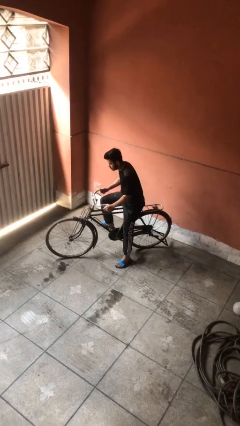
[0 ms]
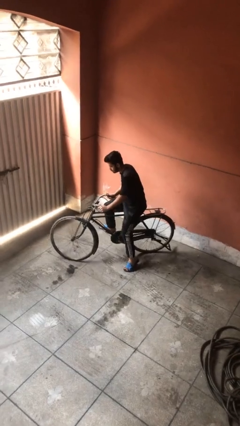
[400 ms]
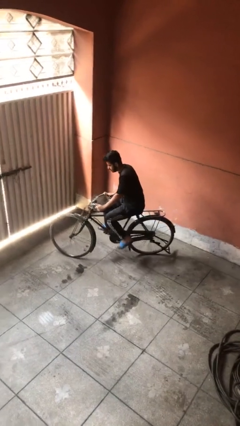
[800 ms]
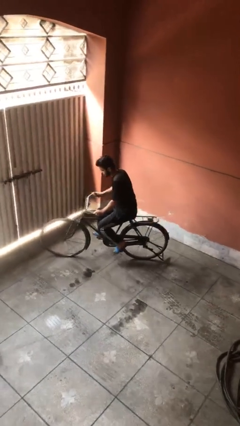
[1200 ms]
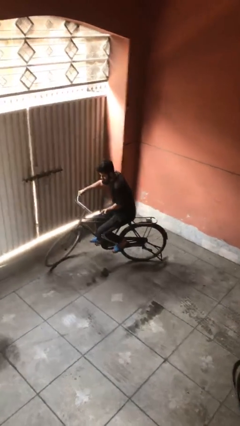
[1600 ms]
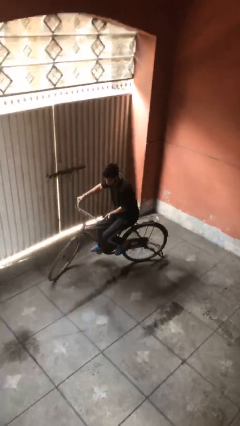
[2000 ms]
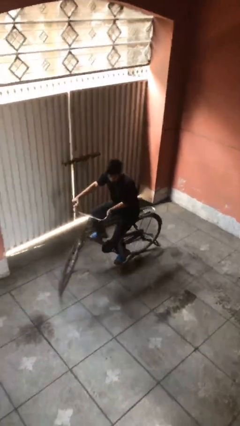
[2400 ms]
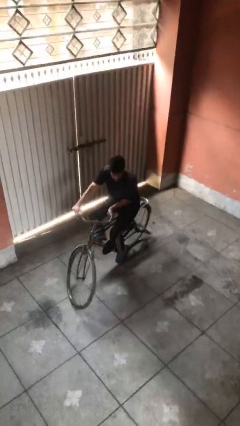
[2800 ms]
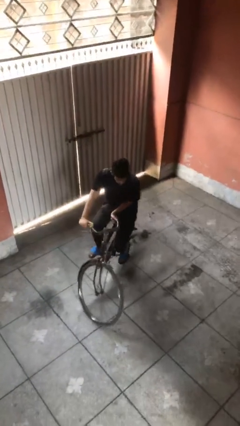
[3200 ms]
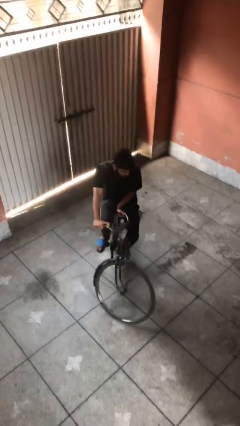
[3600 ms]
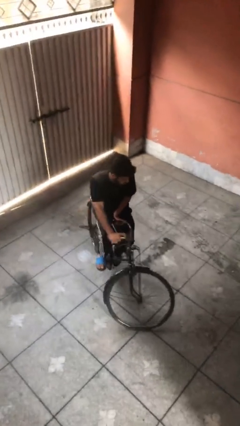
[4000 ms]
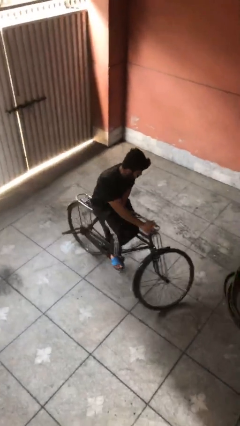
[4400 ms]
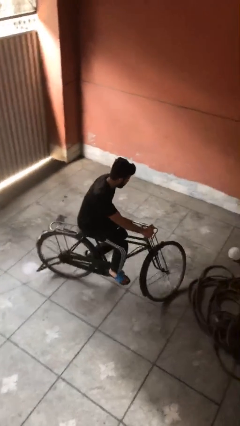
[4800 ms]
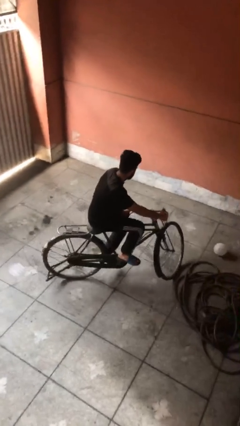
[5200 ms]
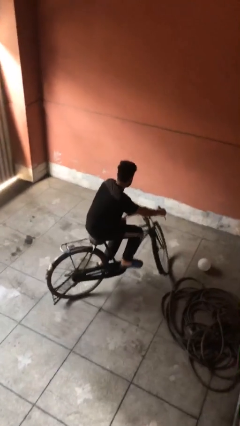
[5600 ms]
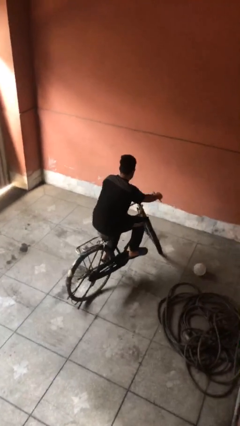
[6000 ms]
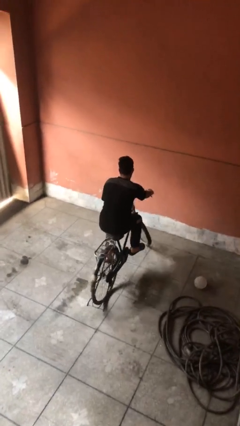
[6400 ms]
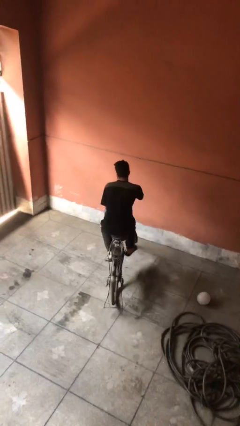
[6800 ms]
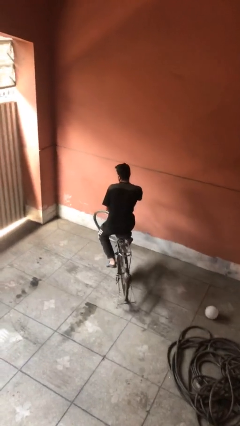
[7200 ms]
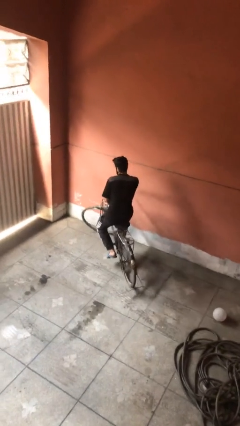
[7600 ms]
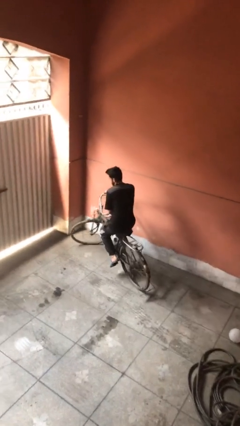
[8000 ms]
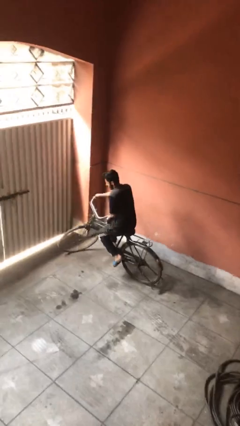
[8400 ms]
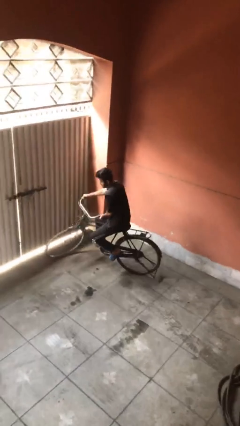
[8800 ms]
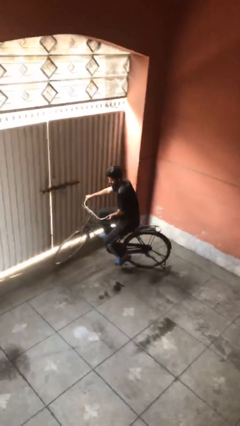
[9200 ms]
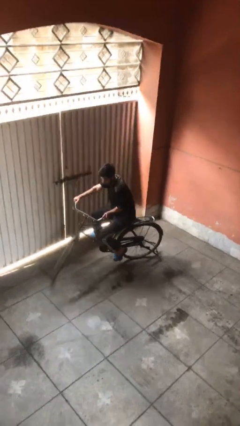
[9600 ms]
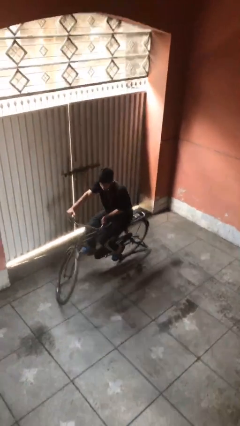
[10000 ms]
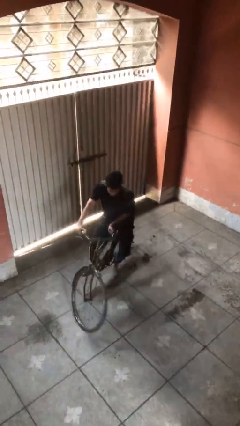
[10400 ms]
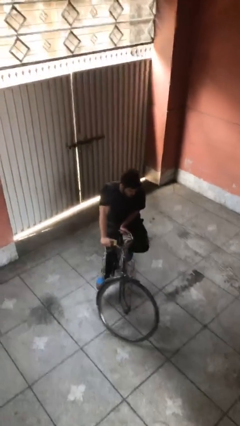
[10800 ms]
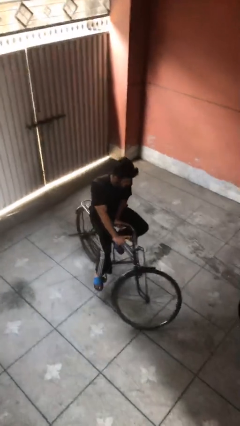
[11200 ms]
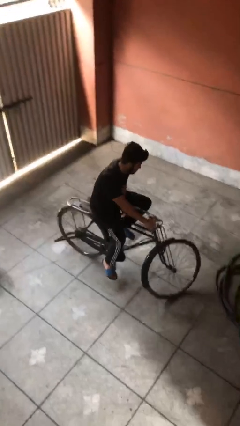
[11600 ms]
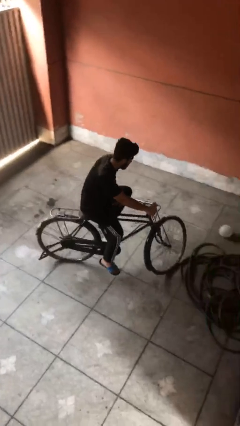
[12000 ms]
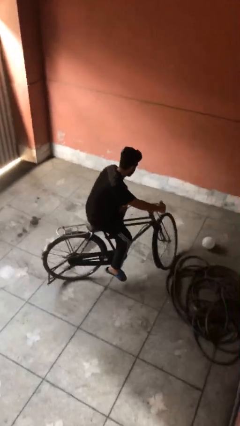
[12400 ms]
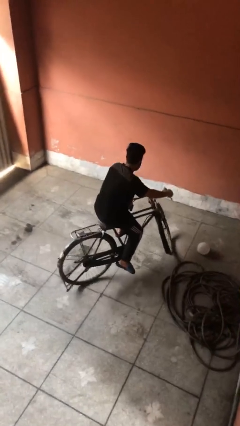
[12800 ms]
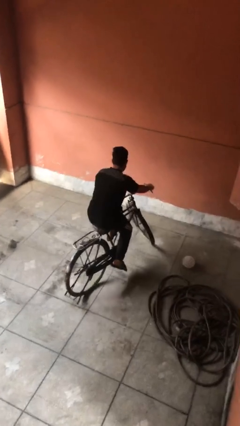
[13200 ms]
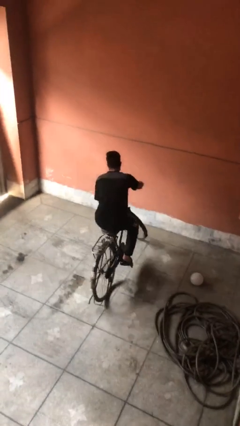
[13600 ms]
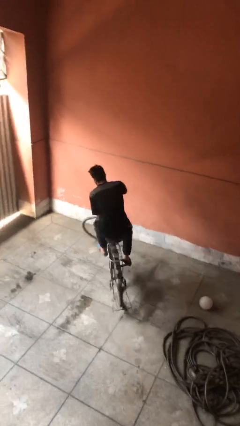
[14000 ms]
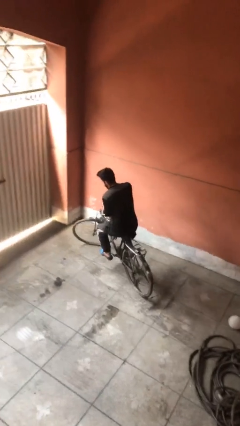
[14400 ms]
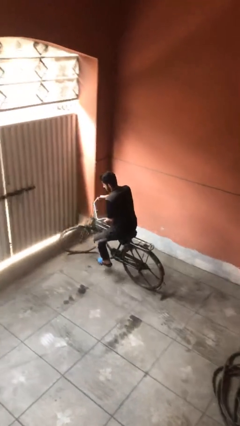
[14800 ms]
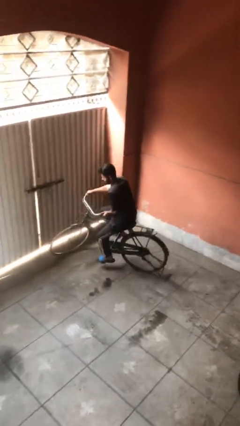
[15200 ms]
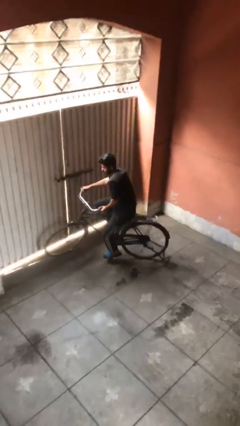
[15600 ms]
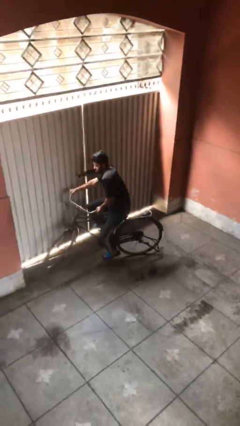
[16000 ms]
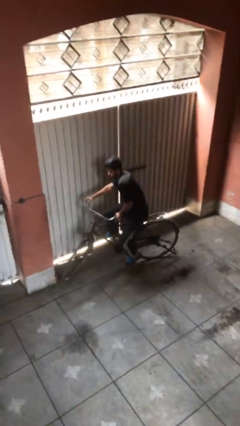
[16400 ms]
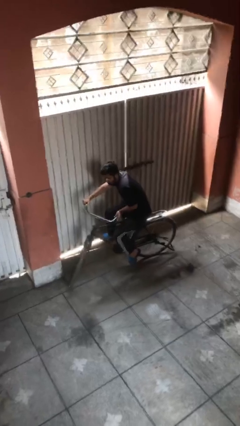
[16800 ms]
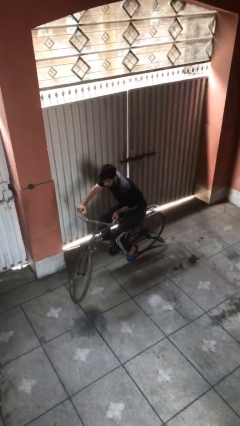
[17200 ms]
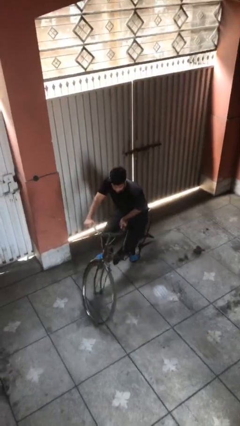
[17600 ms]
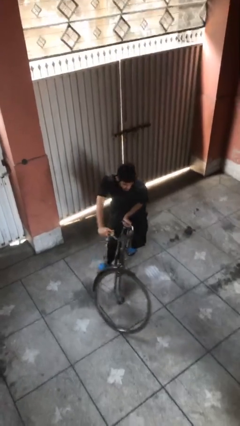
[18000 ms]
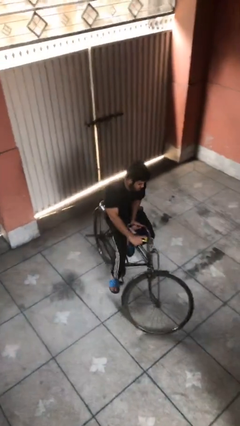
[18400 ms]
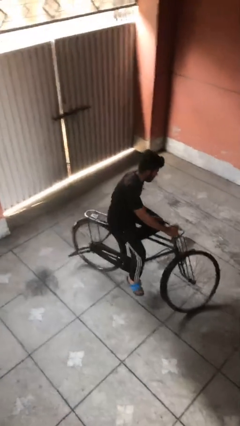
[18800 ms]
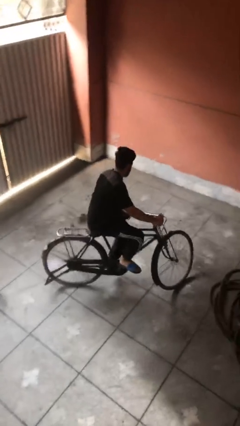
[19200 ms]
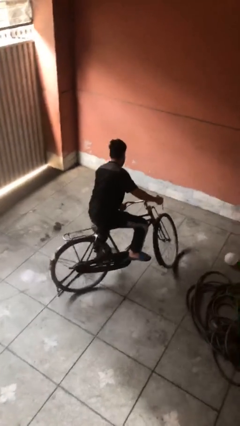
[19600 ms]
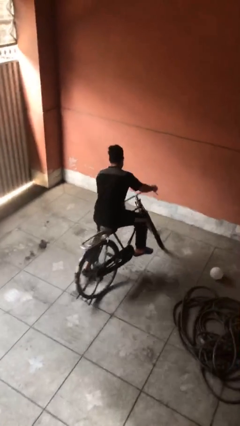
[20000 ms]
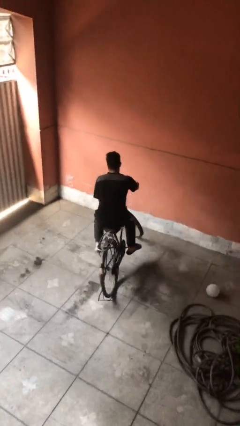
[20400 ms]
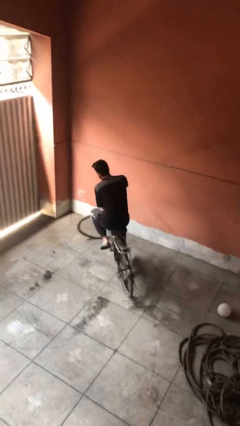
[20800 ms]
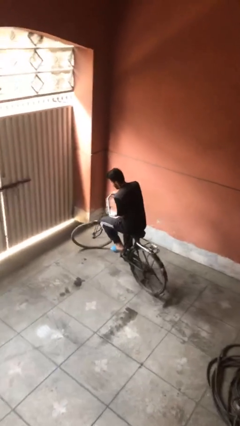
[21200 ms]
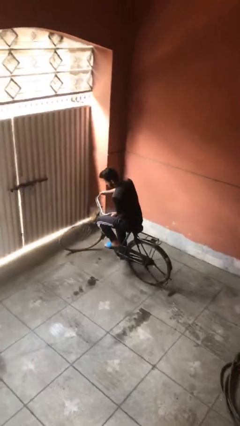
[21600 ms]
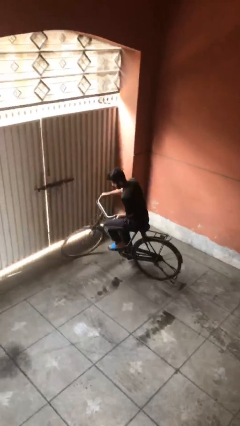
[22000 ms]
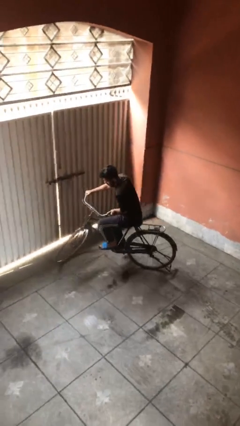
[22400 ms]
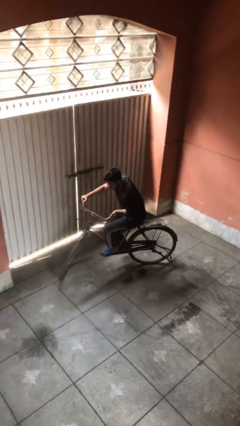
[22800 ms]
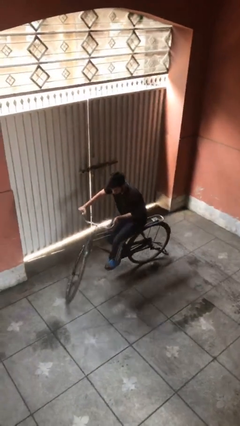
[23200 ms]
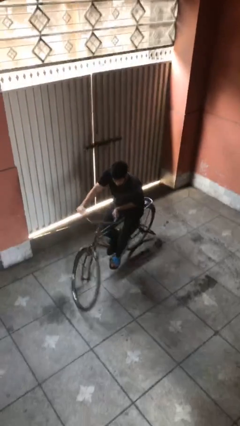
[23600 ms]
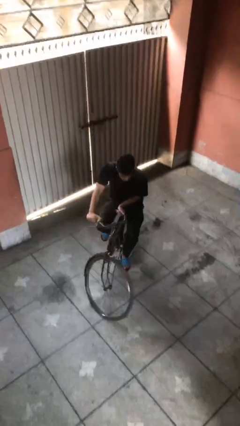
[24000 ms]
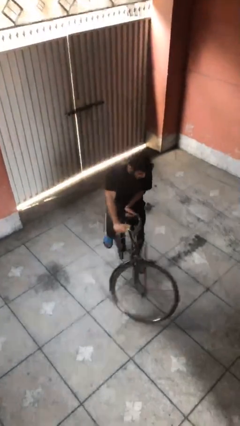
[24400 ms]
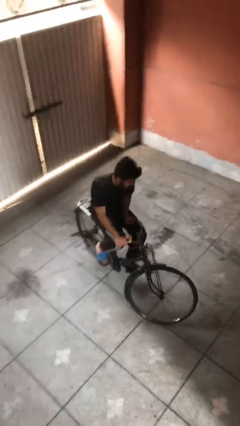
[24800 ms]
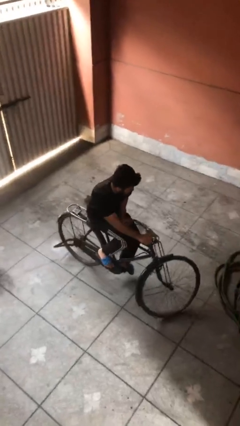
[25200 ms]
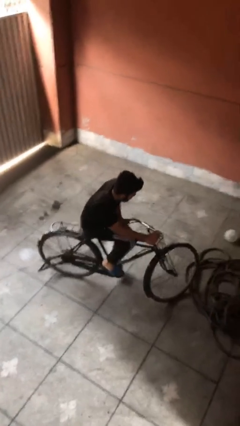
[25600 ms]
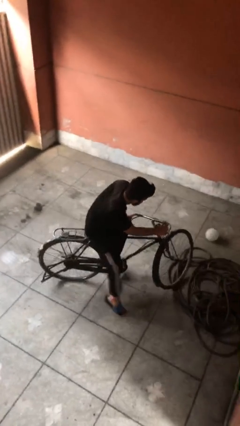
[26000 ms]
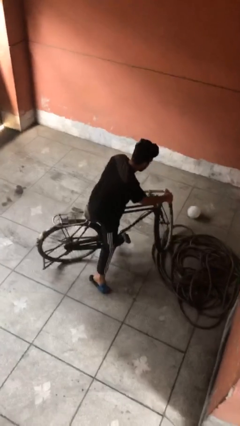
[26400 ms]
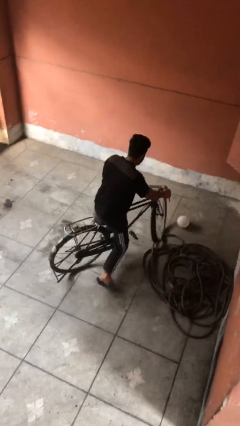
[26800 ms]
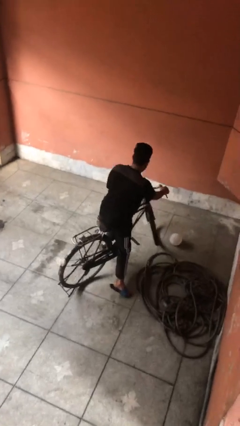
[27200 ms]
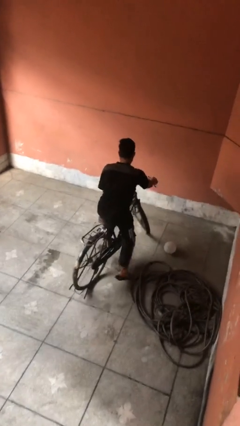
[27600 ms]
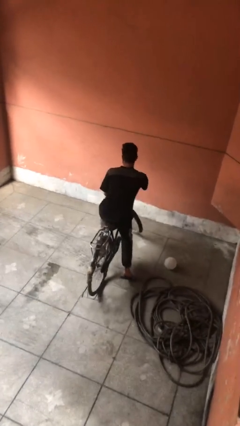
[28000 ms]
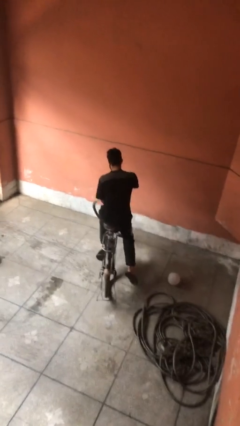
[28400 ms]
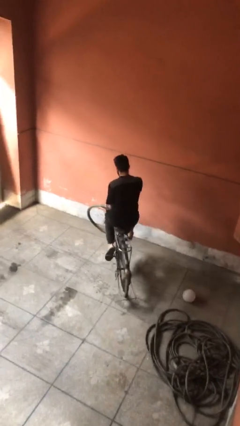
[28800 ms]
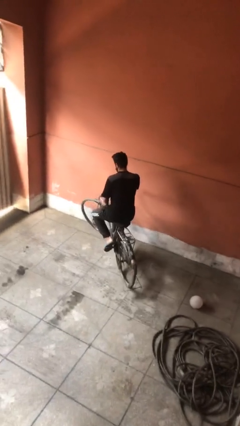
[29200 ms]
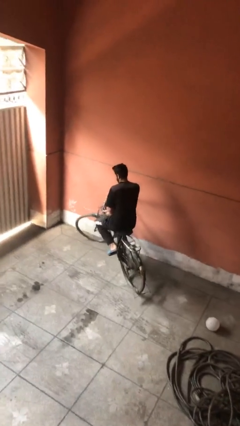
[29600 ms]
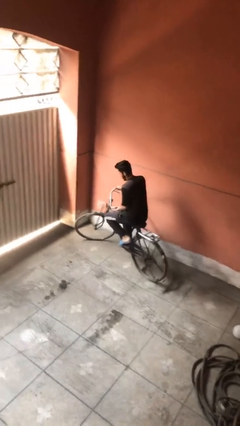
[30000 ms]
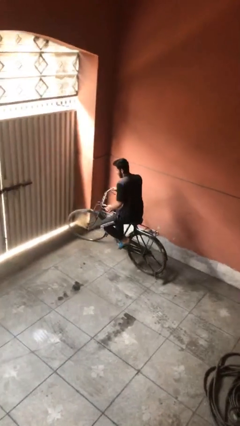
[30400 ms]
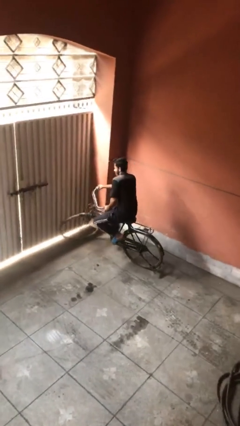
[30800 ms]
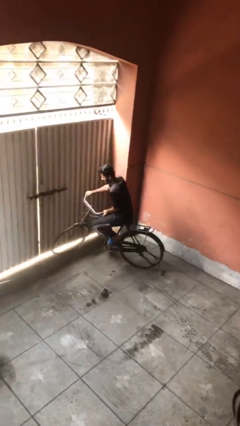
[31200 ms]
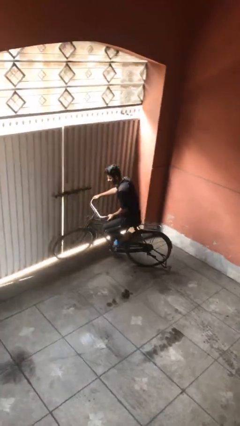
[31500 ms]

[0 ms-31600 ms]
person rides bicycle

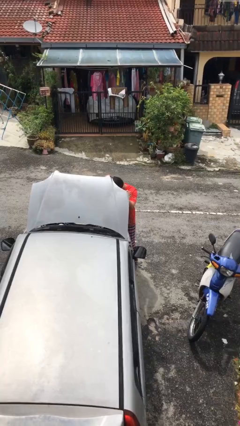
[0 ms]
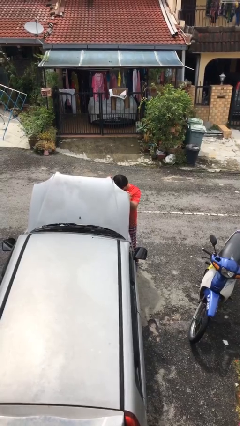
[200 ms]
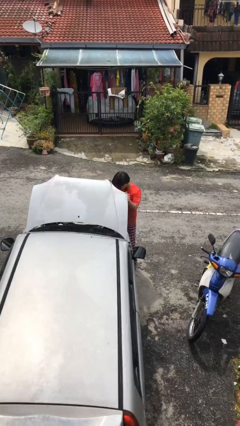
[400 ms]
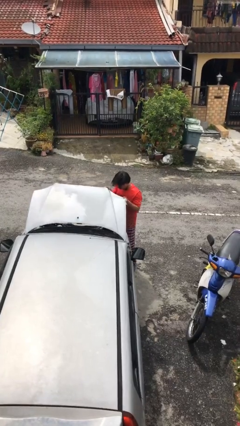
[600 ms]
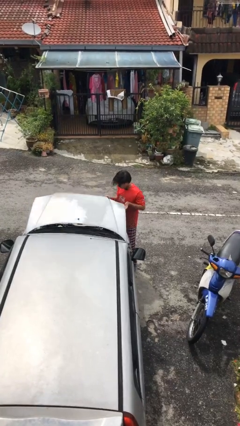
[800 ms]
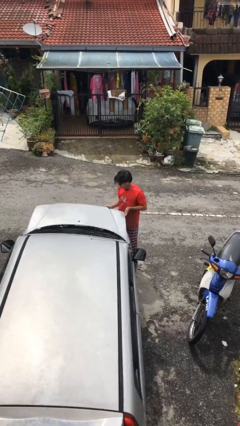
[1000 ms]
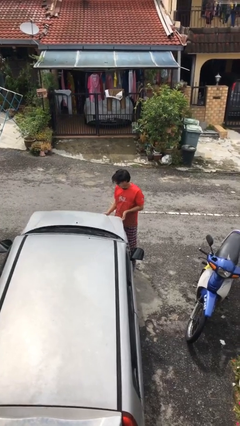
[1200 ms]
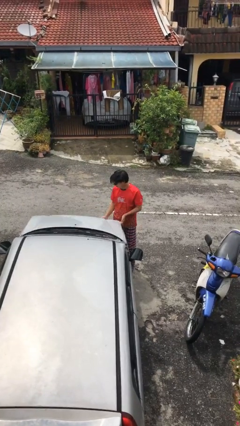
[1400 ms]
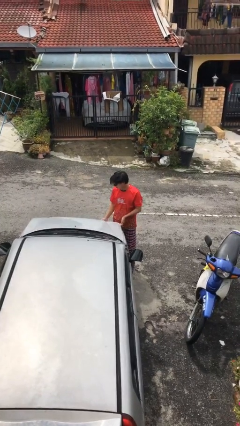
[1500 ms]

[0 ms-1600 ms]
person closes car hood

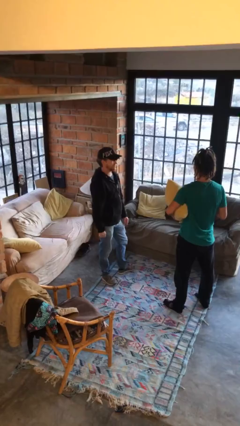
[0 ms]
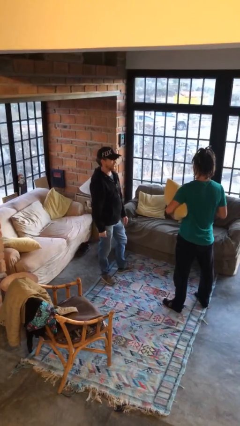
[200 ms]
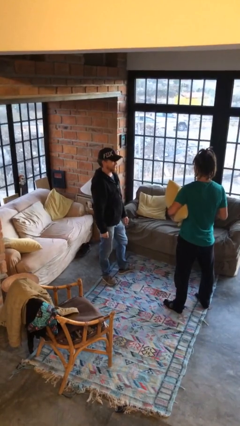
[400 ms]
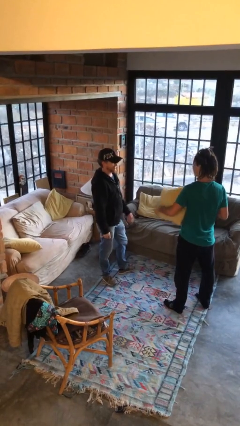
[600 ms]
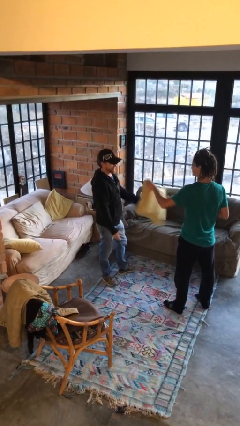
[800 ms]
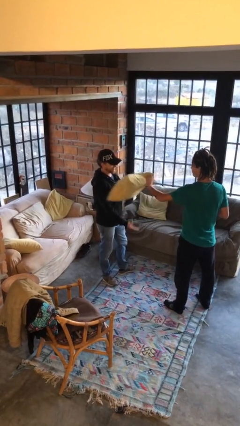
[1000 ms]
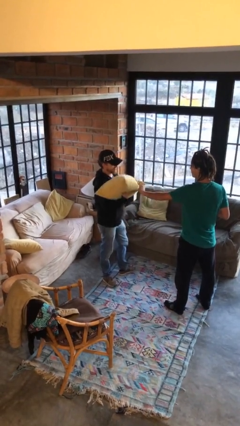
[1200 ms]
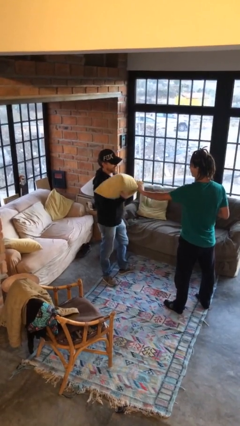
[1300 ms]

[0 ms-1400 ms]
person transfers object to person
